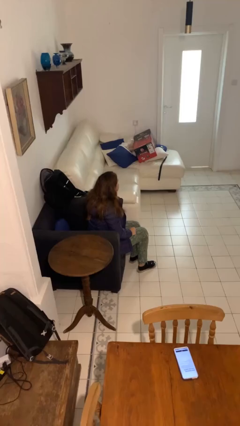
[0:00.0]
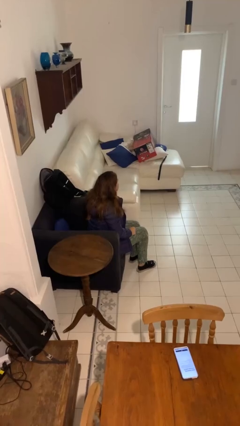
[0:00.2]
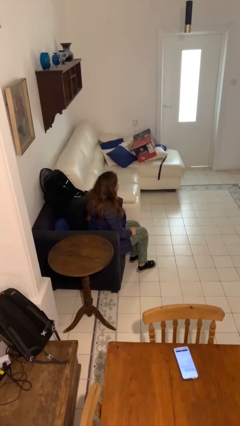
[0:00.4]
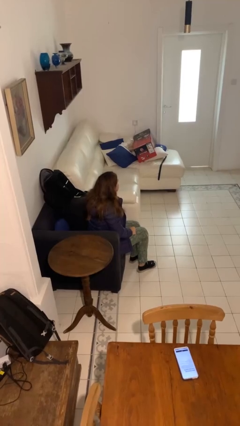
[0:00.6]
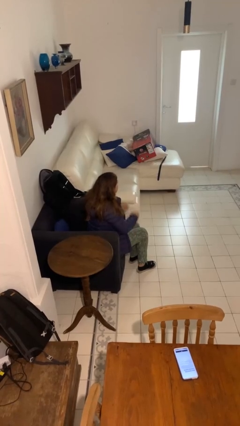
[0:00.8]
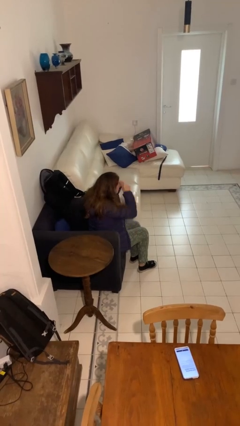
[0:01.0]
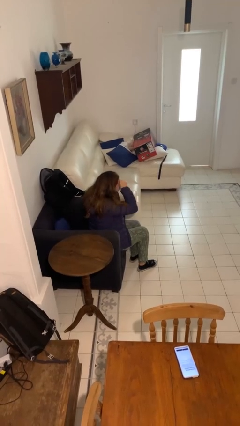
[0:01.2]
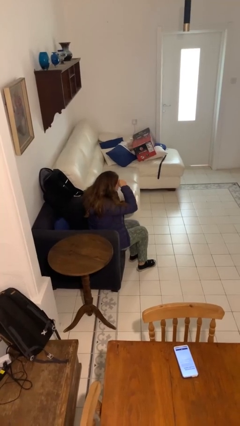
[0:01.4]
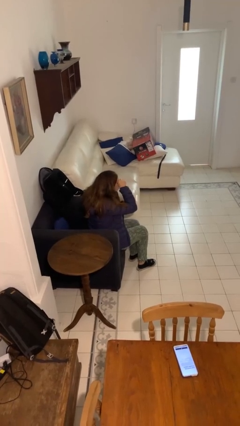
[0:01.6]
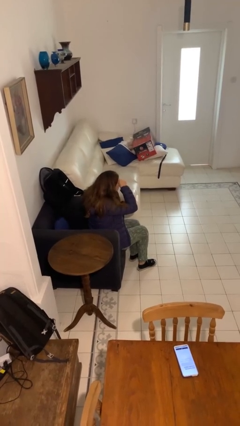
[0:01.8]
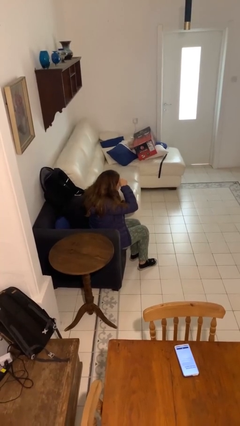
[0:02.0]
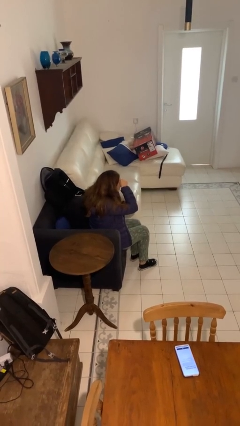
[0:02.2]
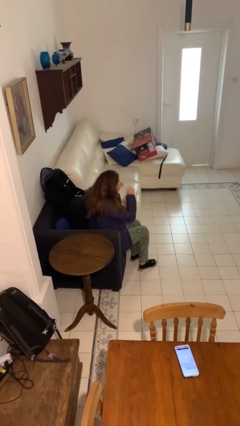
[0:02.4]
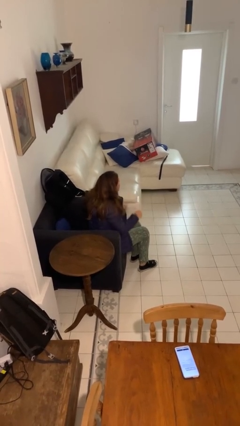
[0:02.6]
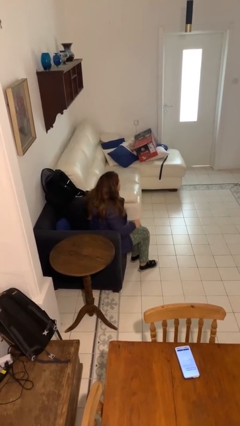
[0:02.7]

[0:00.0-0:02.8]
person rubs eyes

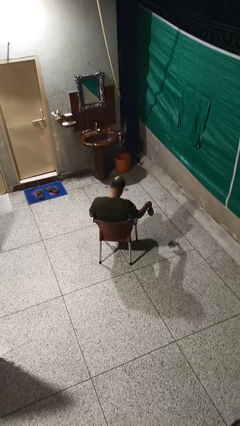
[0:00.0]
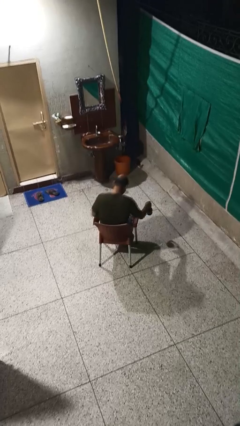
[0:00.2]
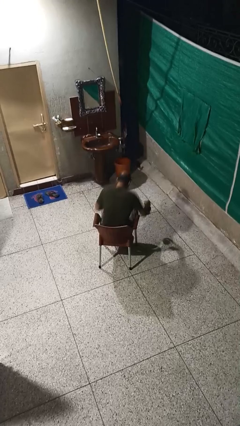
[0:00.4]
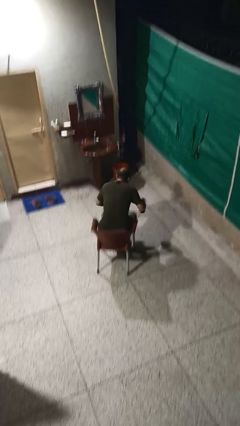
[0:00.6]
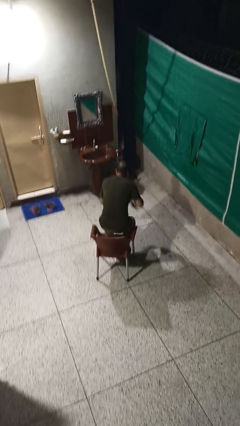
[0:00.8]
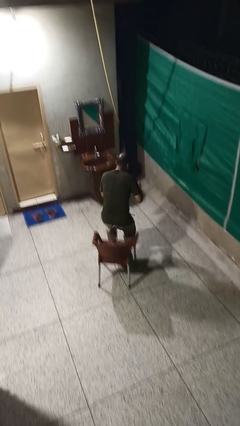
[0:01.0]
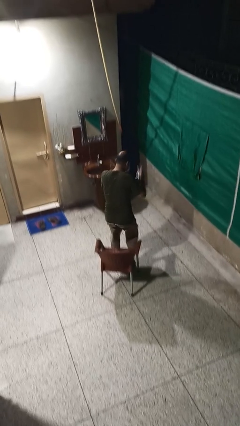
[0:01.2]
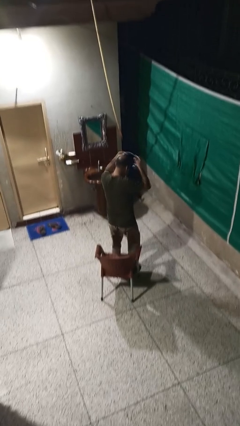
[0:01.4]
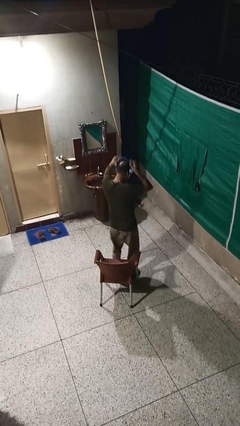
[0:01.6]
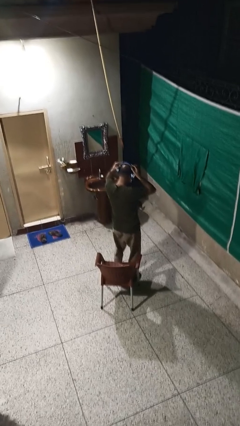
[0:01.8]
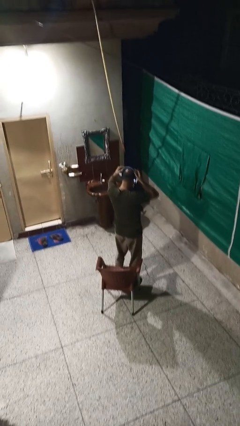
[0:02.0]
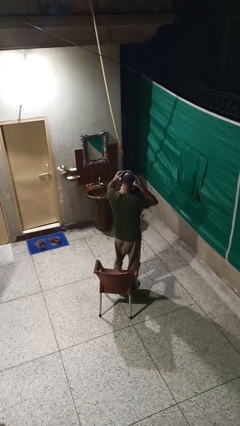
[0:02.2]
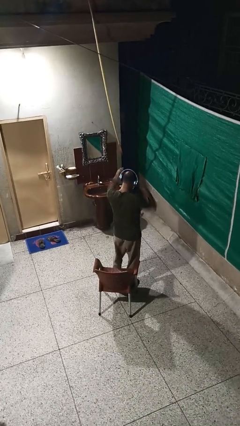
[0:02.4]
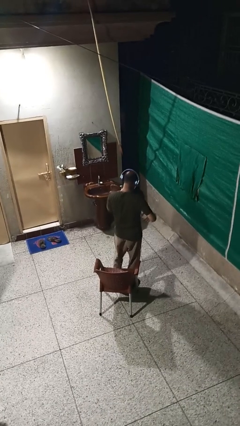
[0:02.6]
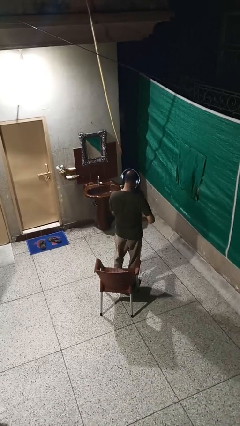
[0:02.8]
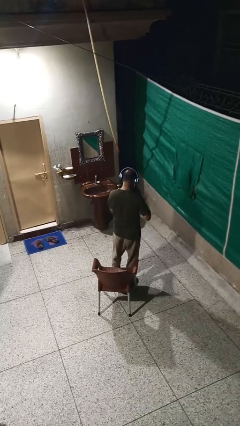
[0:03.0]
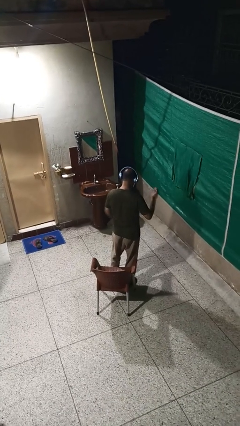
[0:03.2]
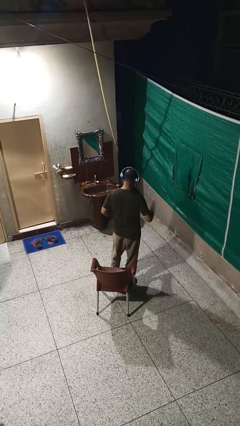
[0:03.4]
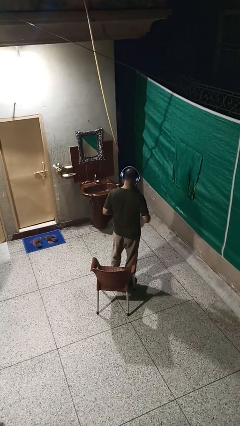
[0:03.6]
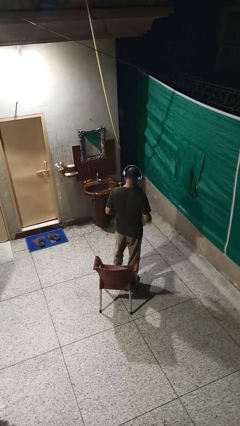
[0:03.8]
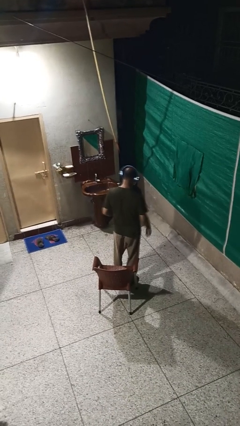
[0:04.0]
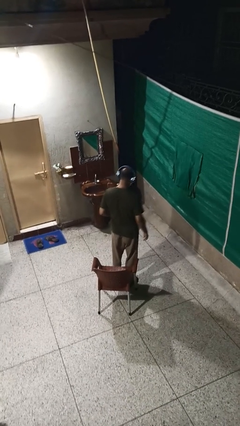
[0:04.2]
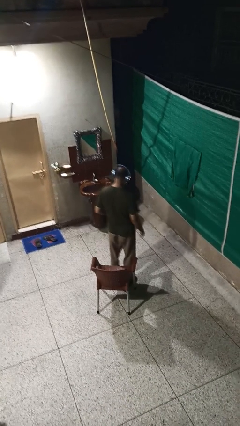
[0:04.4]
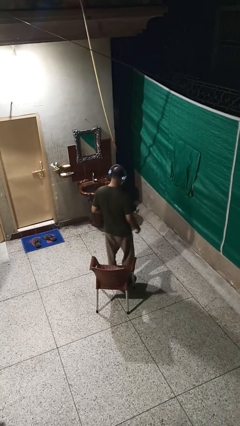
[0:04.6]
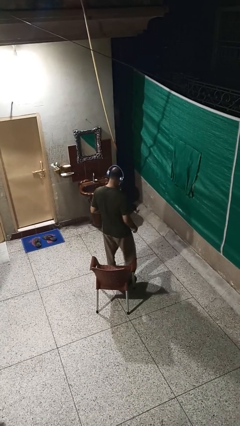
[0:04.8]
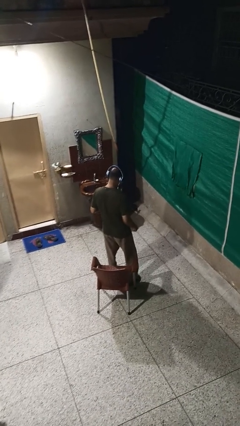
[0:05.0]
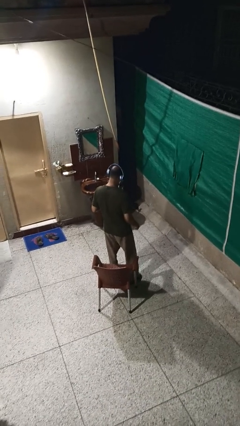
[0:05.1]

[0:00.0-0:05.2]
person puts on headphones

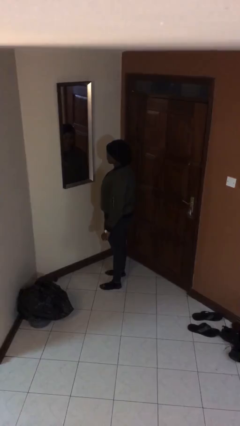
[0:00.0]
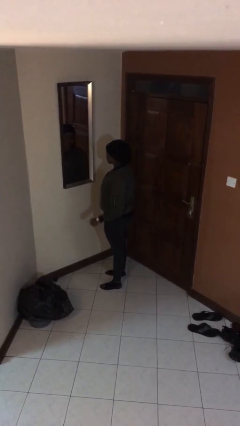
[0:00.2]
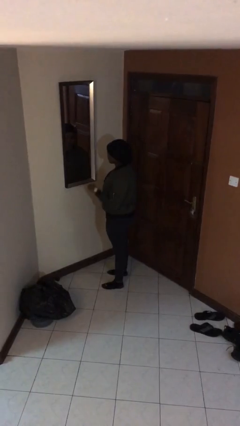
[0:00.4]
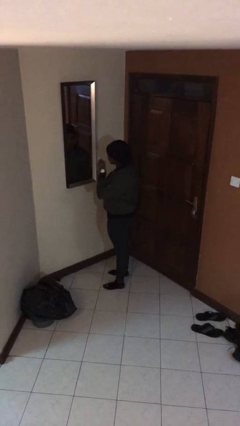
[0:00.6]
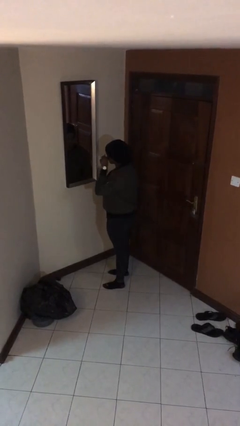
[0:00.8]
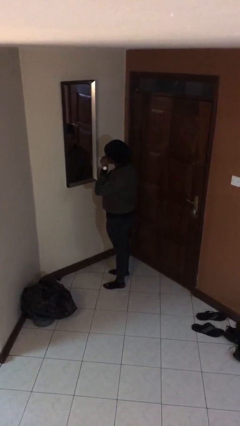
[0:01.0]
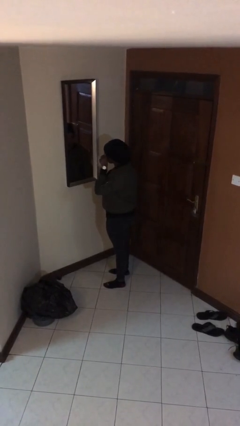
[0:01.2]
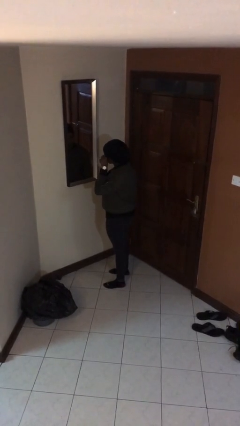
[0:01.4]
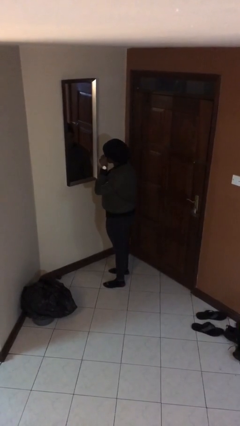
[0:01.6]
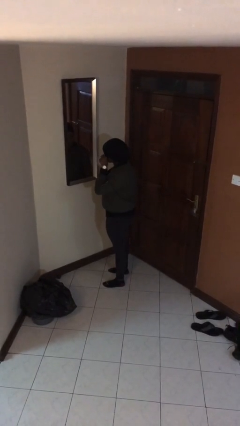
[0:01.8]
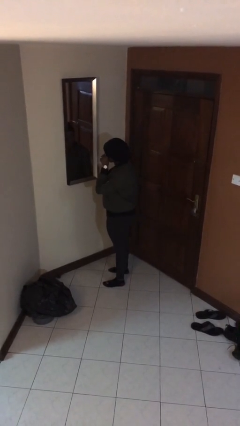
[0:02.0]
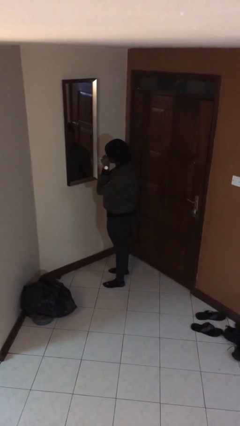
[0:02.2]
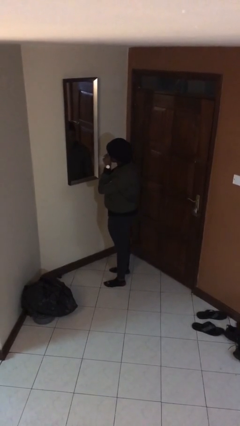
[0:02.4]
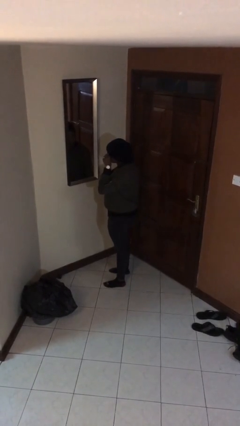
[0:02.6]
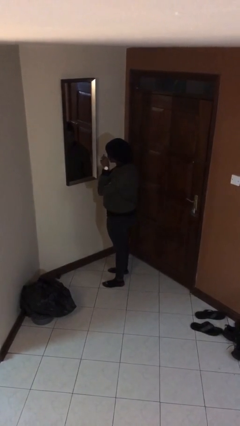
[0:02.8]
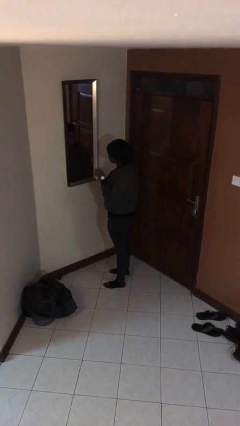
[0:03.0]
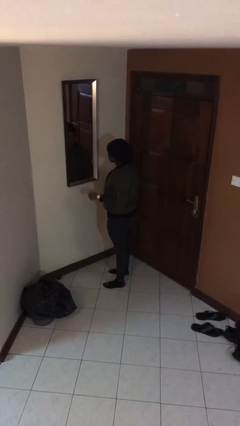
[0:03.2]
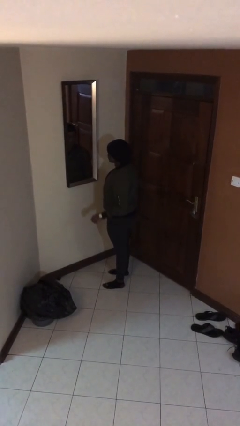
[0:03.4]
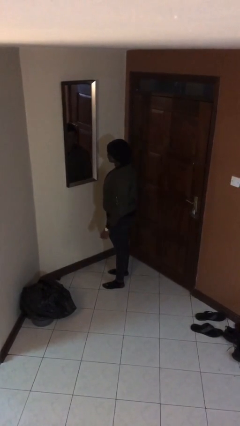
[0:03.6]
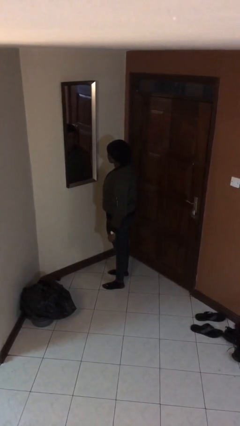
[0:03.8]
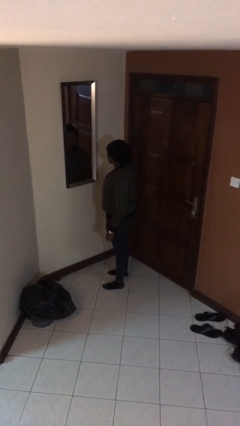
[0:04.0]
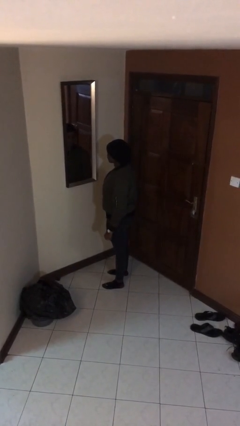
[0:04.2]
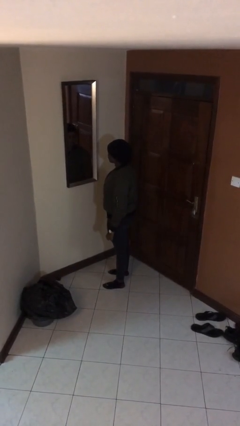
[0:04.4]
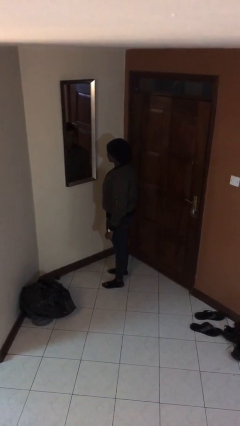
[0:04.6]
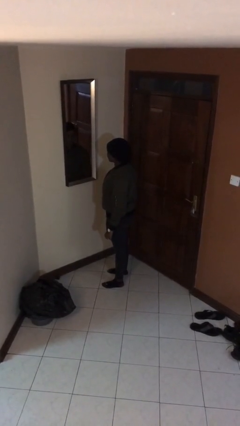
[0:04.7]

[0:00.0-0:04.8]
person applies eye makeup

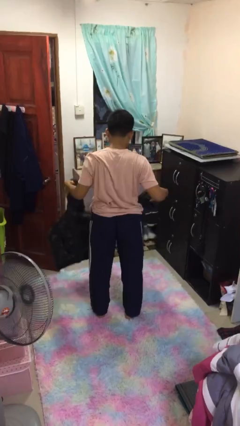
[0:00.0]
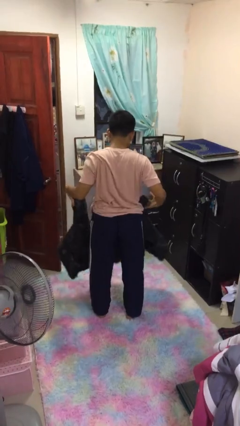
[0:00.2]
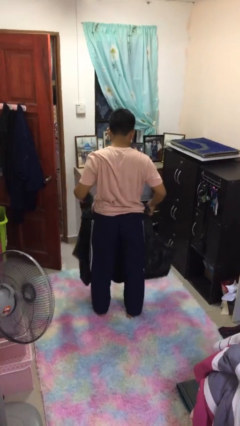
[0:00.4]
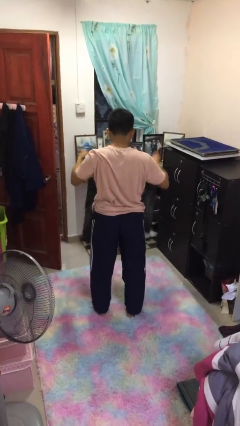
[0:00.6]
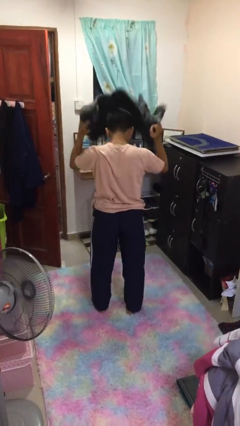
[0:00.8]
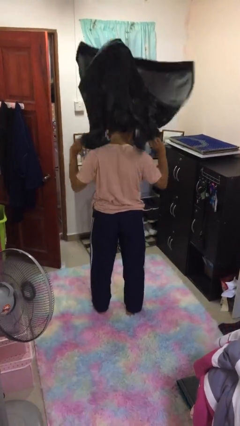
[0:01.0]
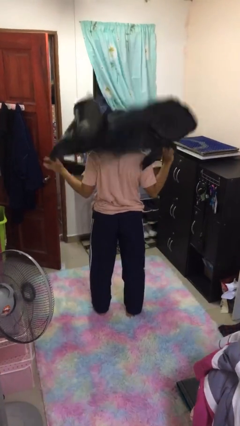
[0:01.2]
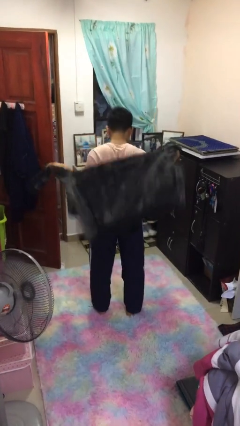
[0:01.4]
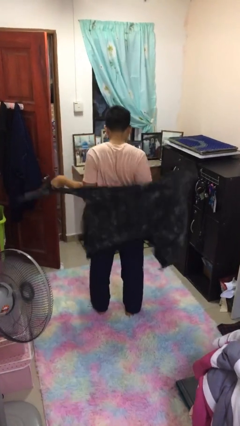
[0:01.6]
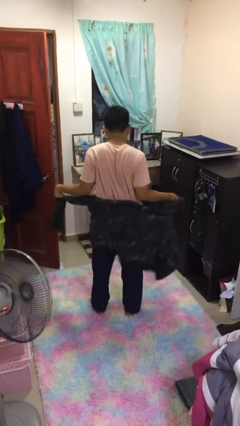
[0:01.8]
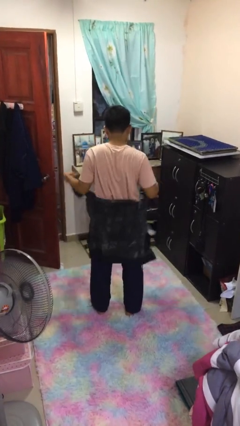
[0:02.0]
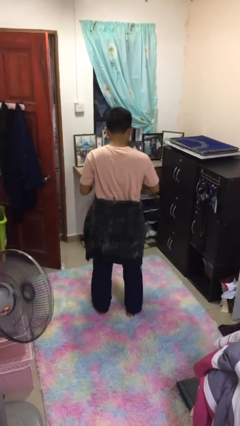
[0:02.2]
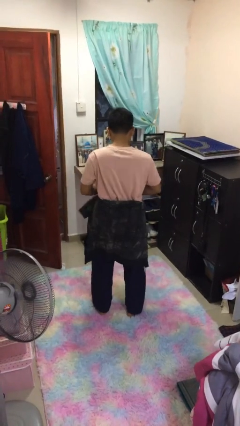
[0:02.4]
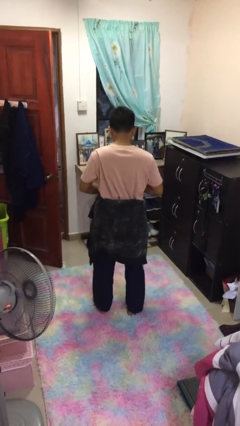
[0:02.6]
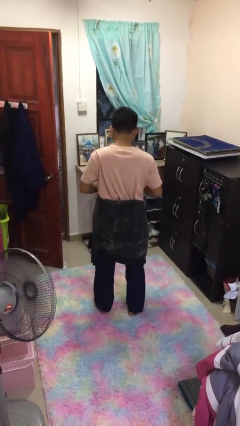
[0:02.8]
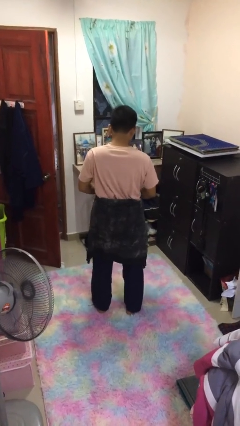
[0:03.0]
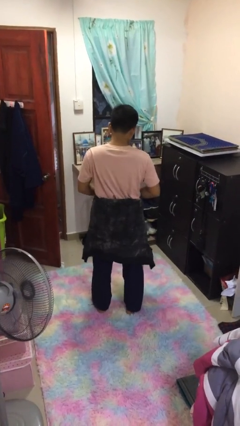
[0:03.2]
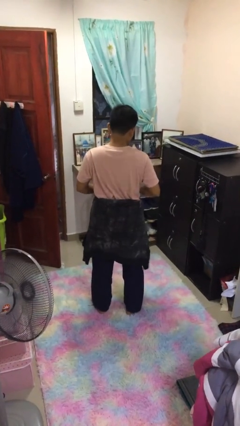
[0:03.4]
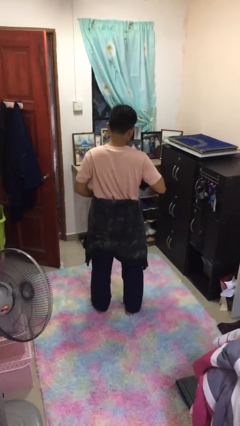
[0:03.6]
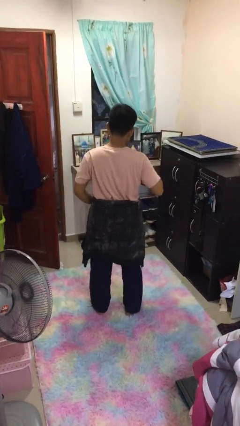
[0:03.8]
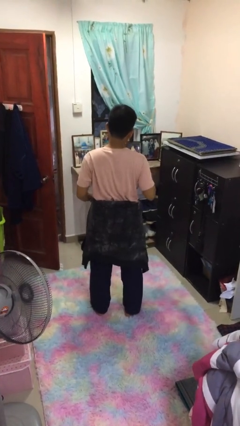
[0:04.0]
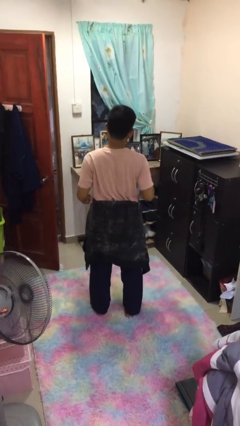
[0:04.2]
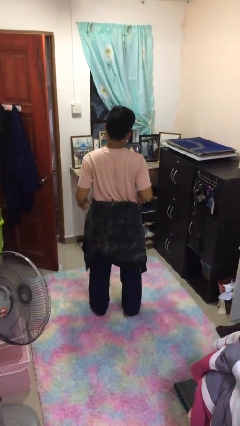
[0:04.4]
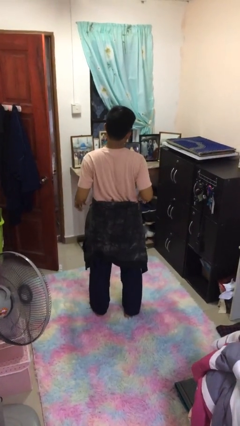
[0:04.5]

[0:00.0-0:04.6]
person ties jacket around waist

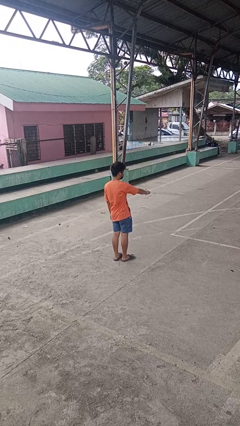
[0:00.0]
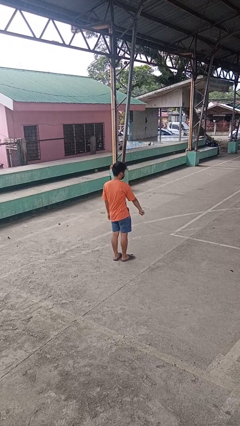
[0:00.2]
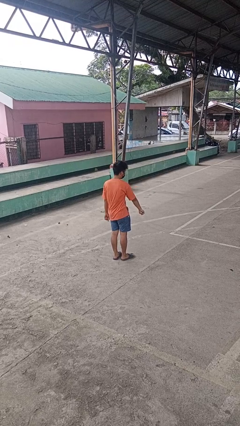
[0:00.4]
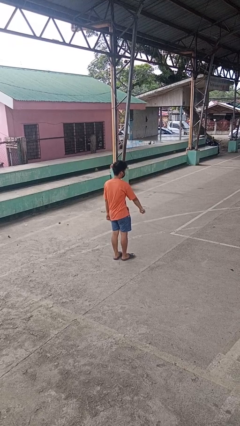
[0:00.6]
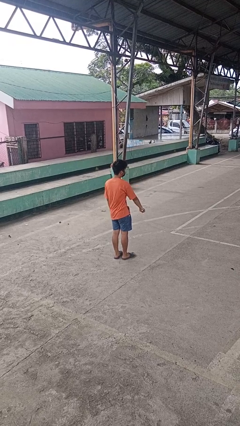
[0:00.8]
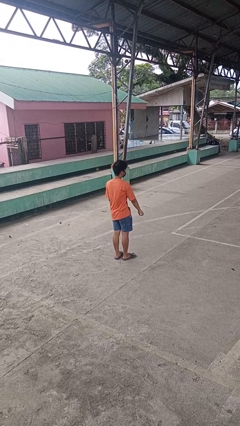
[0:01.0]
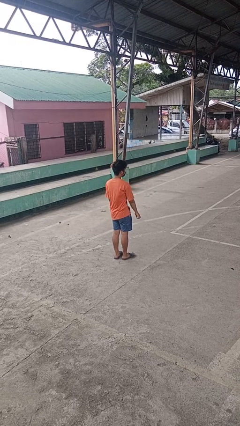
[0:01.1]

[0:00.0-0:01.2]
person gestures swipe down
